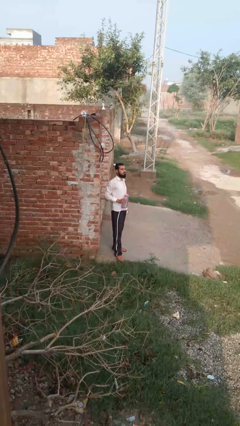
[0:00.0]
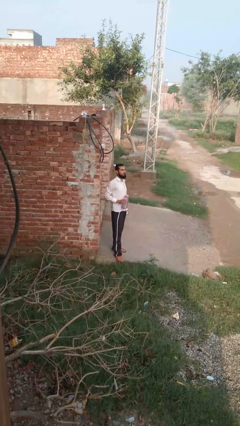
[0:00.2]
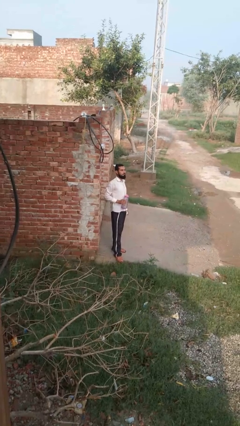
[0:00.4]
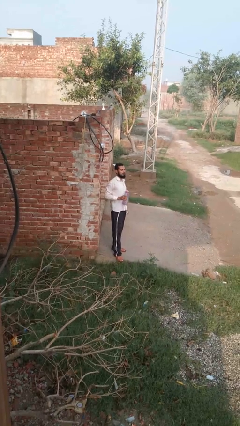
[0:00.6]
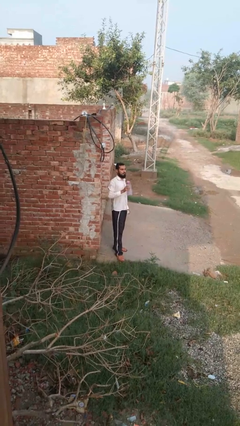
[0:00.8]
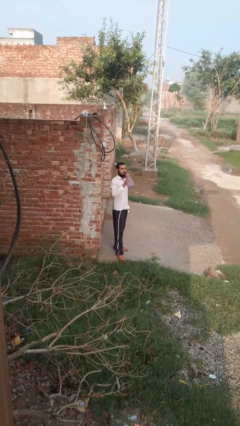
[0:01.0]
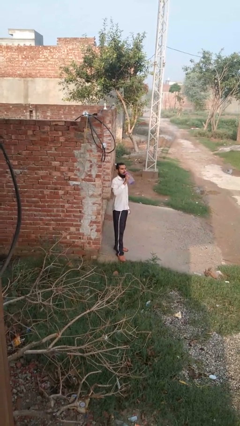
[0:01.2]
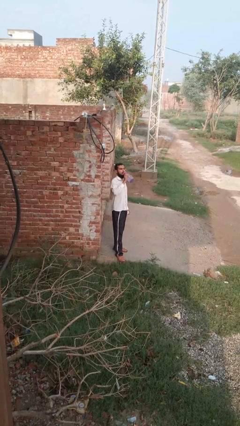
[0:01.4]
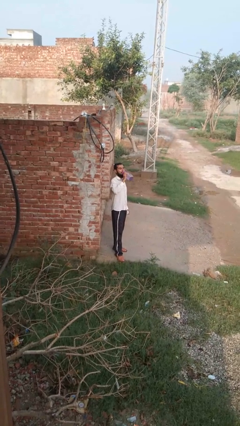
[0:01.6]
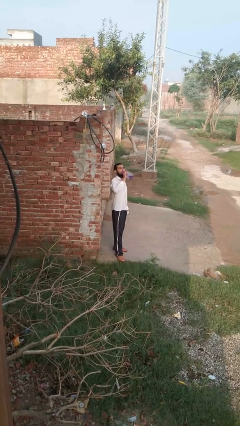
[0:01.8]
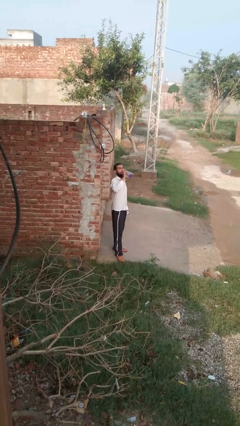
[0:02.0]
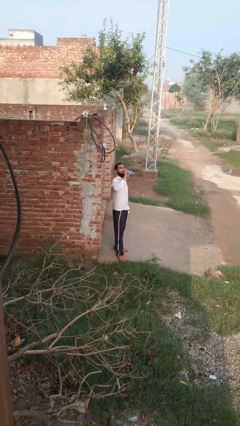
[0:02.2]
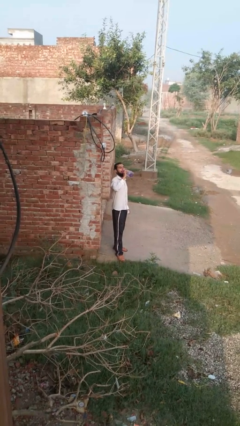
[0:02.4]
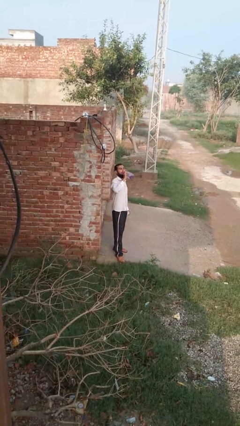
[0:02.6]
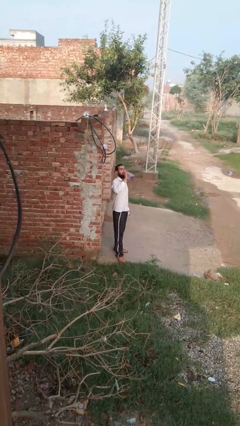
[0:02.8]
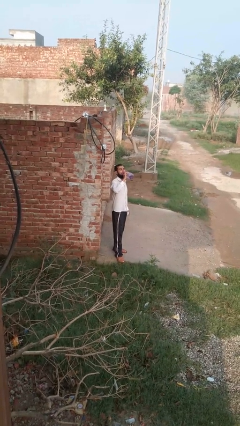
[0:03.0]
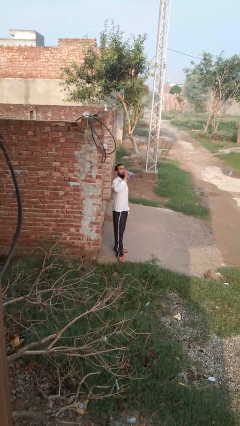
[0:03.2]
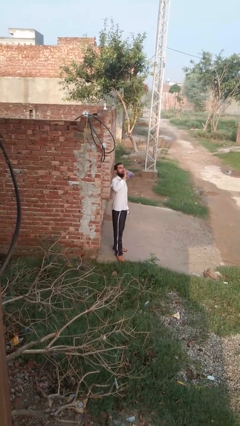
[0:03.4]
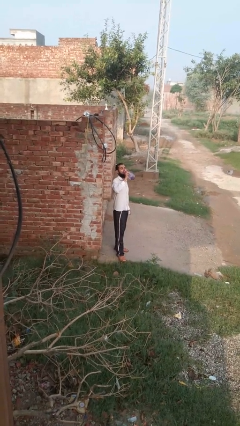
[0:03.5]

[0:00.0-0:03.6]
person drinks from bottle

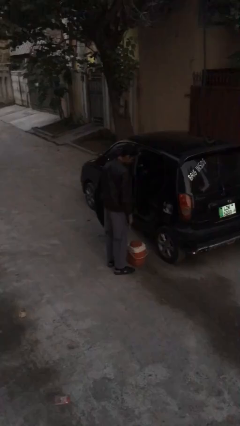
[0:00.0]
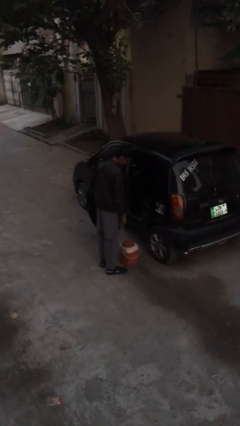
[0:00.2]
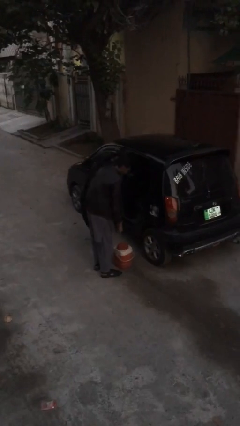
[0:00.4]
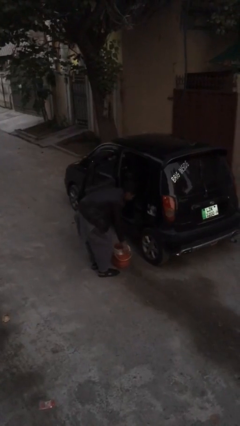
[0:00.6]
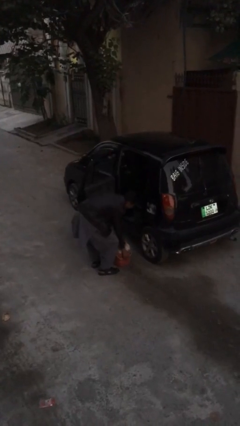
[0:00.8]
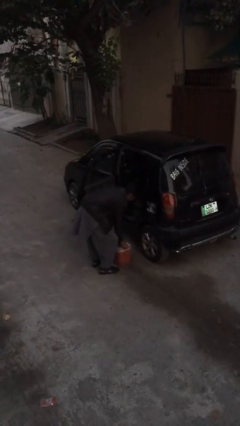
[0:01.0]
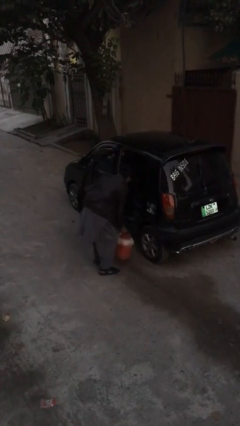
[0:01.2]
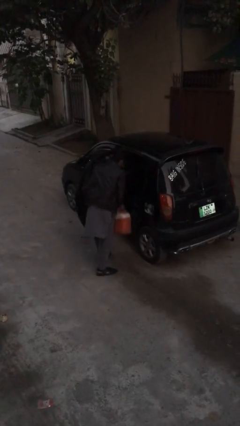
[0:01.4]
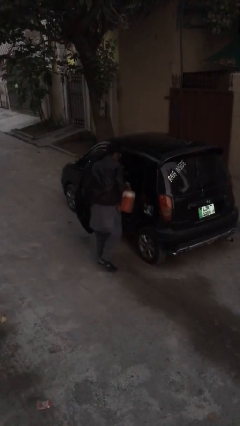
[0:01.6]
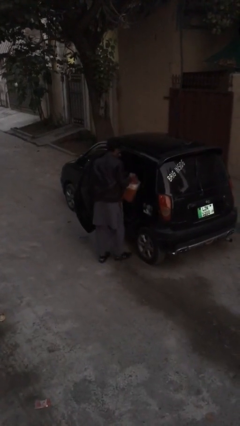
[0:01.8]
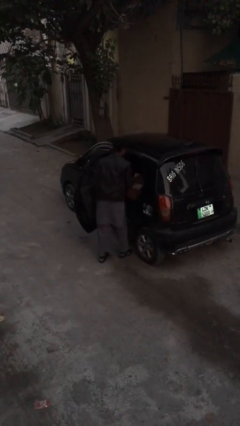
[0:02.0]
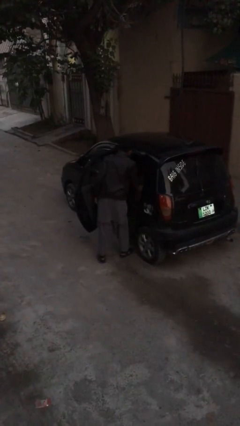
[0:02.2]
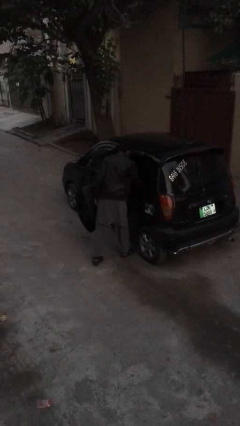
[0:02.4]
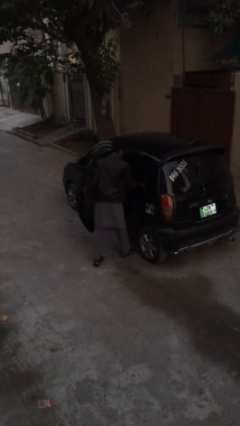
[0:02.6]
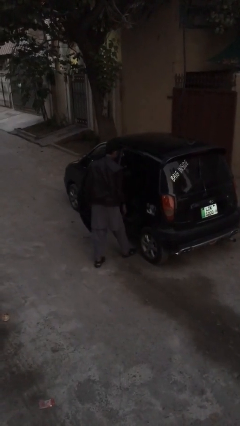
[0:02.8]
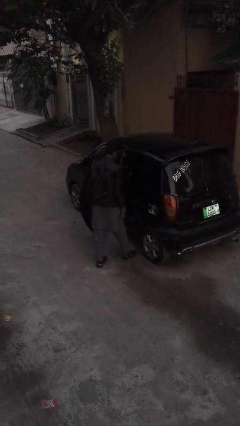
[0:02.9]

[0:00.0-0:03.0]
person loads car

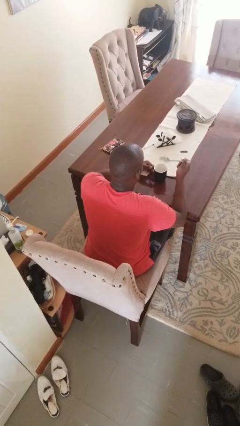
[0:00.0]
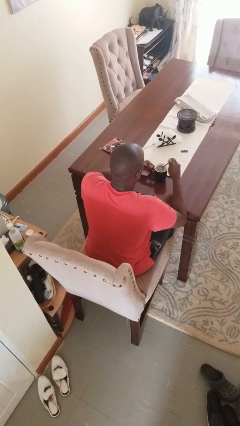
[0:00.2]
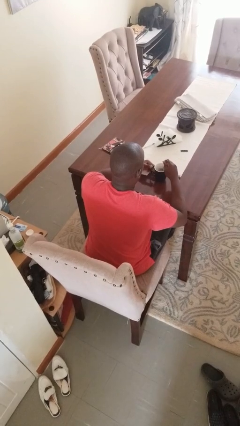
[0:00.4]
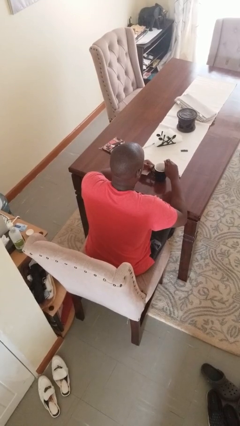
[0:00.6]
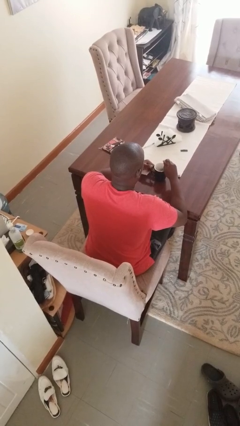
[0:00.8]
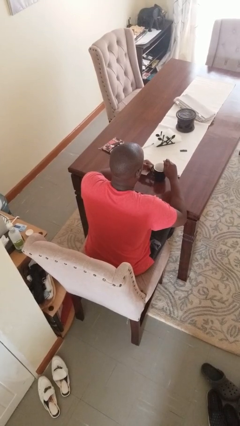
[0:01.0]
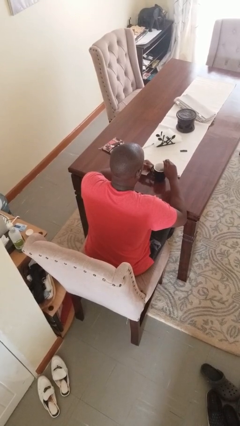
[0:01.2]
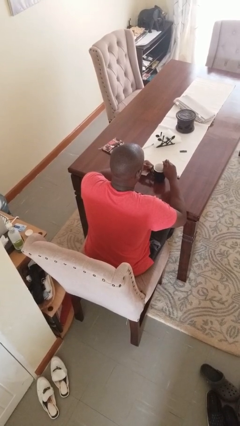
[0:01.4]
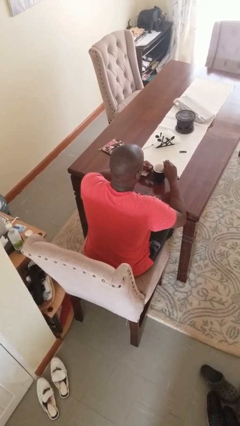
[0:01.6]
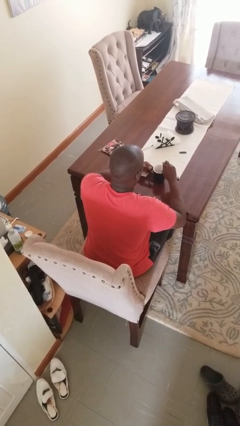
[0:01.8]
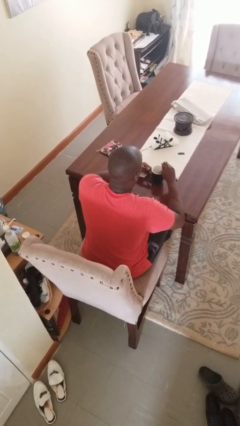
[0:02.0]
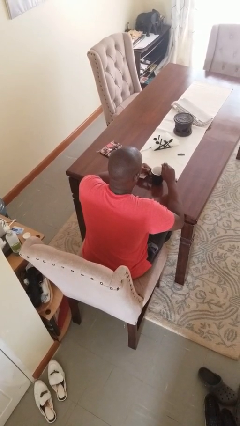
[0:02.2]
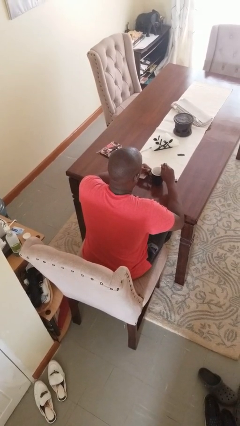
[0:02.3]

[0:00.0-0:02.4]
person stirs mug

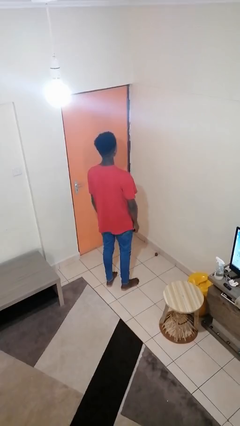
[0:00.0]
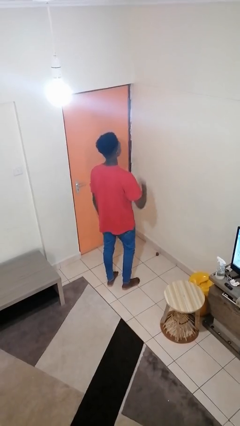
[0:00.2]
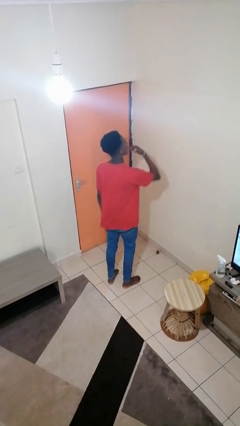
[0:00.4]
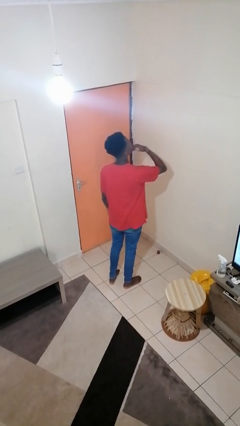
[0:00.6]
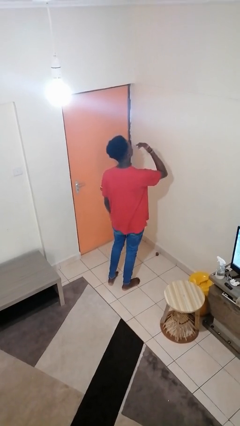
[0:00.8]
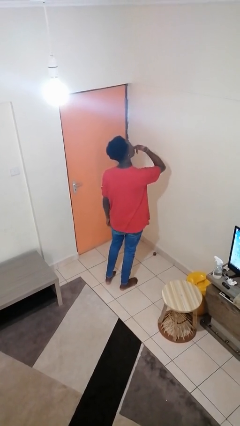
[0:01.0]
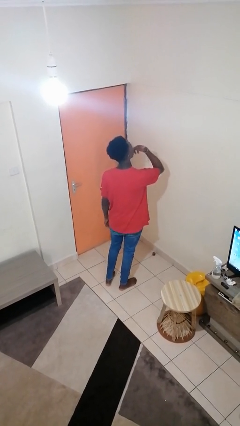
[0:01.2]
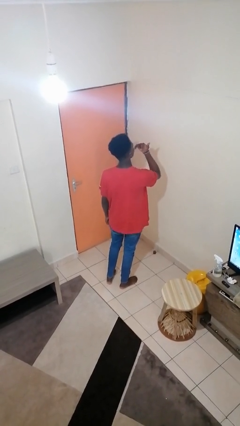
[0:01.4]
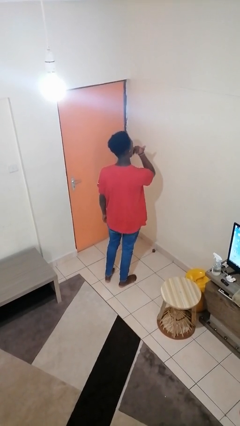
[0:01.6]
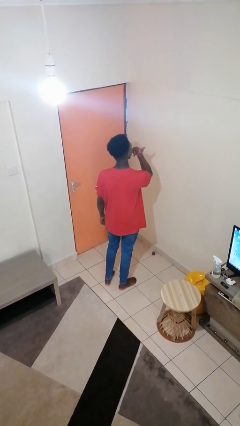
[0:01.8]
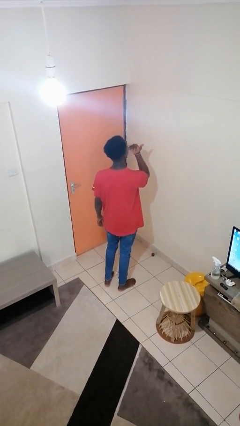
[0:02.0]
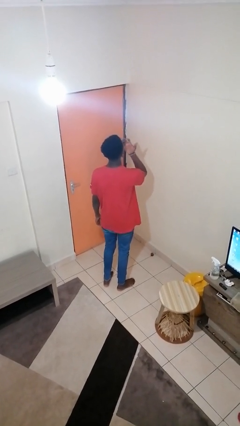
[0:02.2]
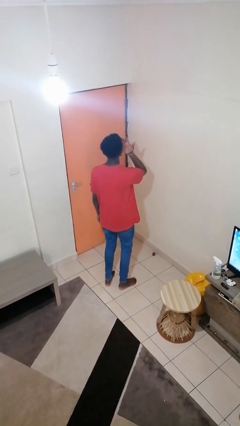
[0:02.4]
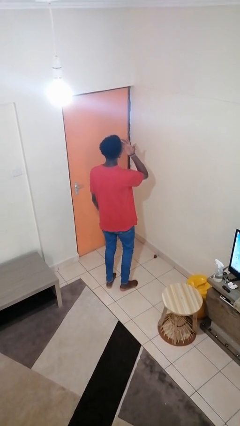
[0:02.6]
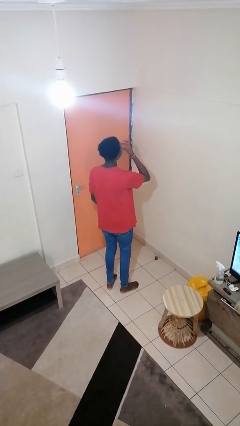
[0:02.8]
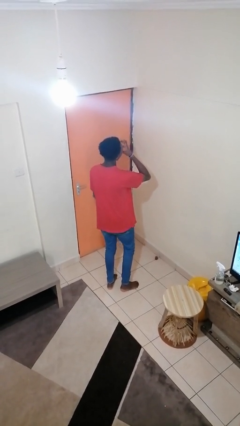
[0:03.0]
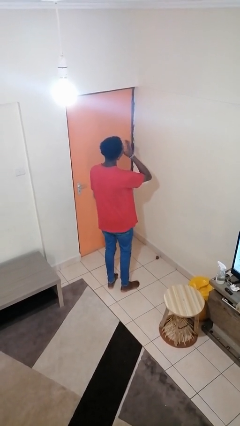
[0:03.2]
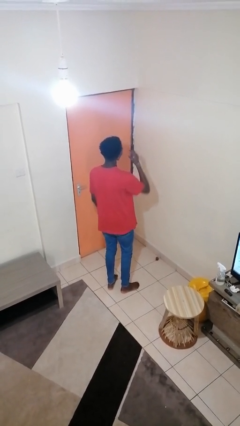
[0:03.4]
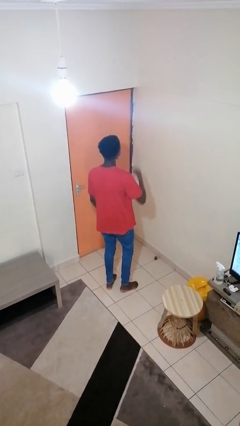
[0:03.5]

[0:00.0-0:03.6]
person licks fingers

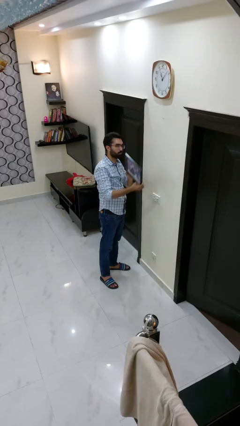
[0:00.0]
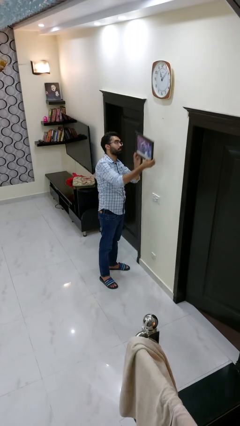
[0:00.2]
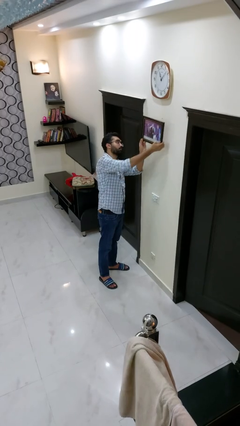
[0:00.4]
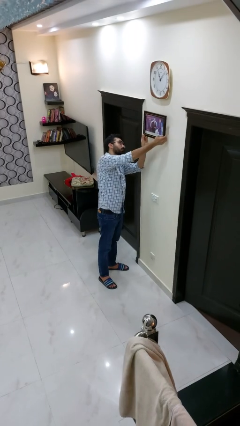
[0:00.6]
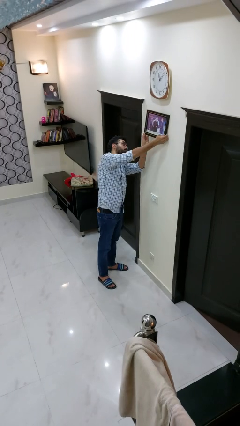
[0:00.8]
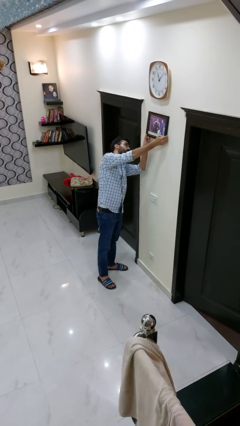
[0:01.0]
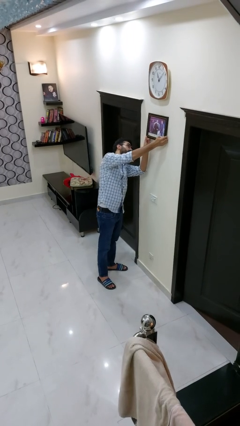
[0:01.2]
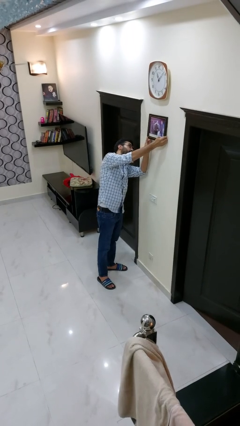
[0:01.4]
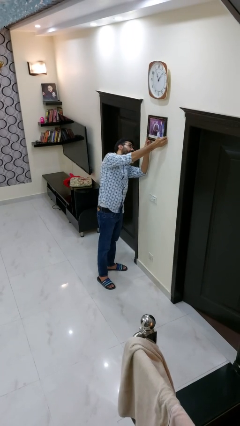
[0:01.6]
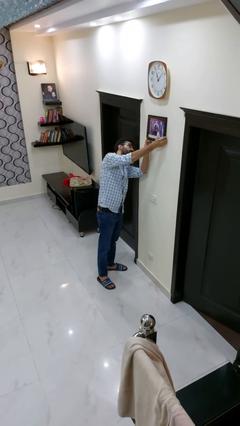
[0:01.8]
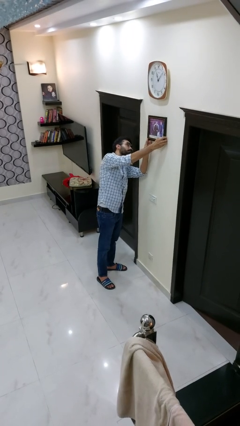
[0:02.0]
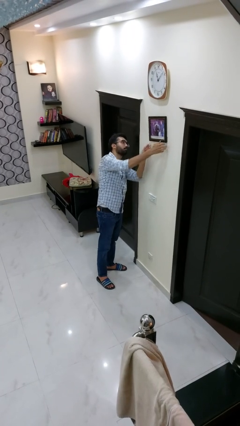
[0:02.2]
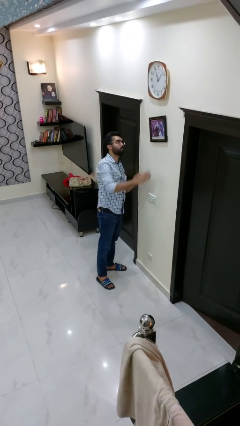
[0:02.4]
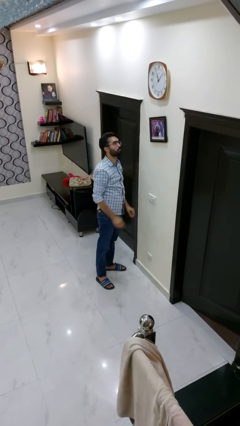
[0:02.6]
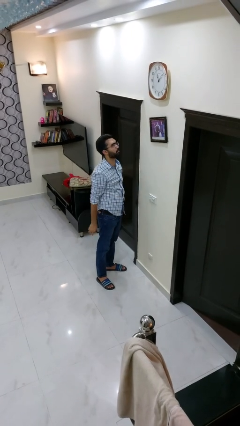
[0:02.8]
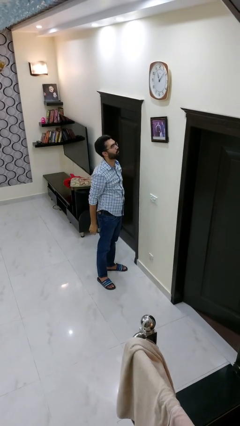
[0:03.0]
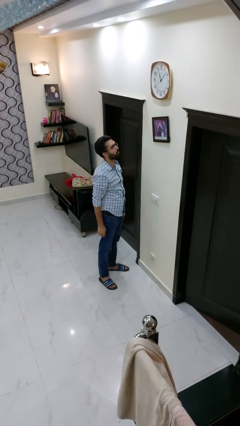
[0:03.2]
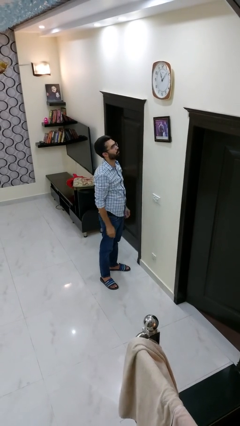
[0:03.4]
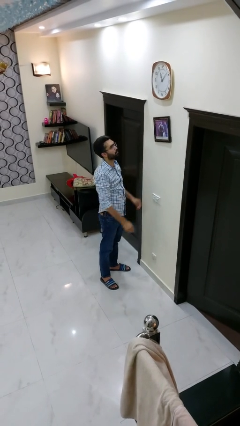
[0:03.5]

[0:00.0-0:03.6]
person puts up picture frame

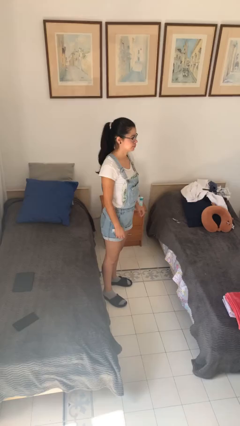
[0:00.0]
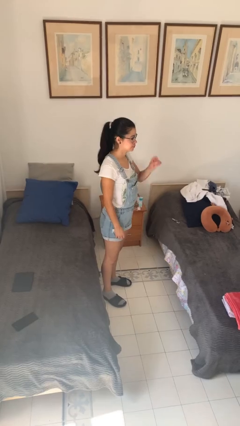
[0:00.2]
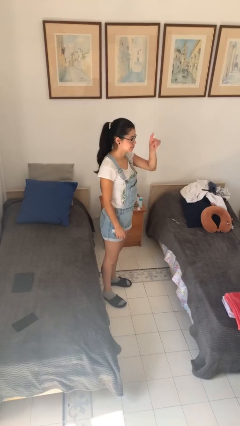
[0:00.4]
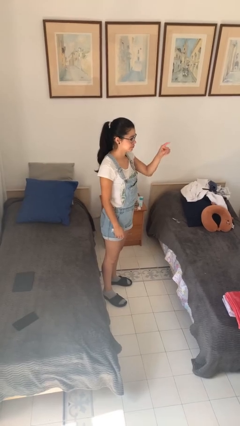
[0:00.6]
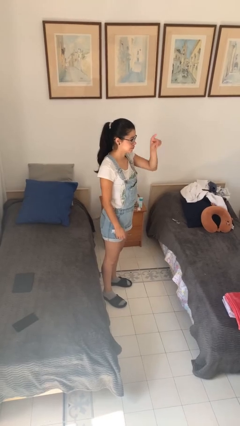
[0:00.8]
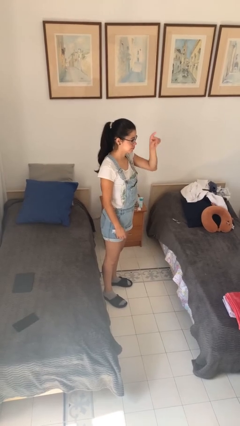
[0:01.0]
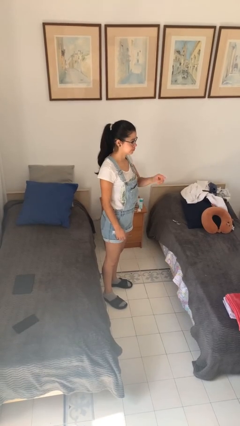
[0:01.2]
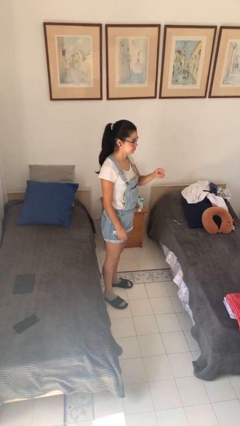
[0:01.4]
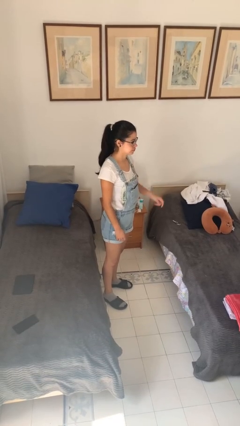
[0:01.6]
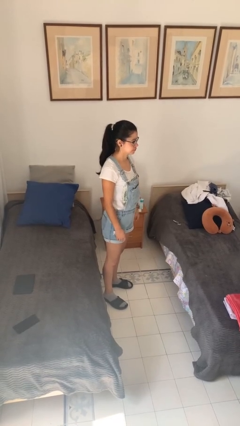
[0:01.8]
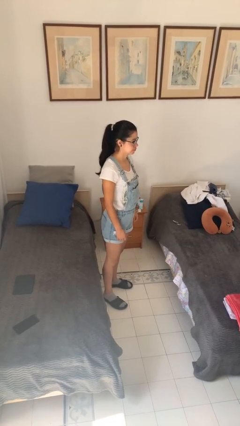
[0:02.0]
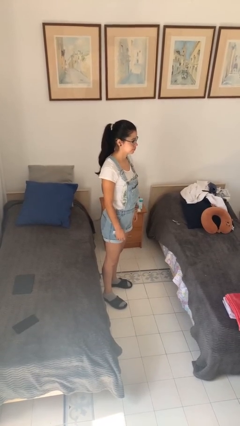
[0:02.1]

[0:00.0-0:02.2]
person gestures number four
